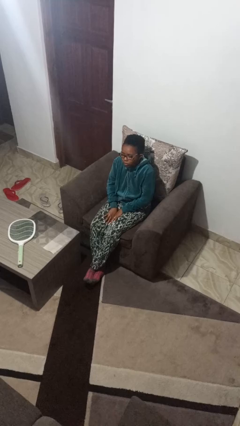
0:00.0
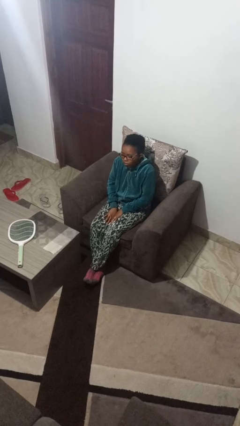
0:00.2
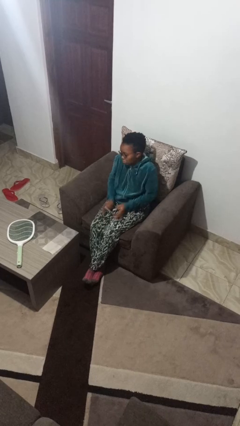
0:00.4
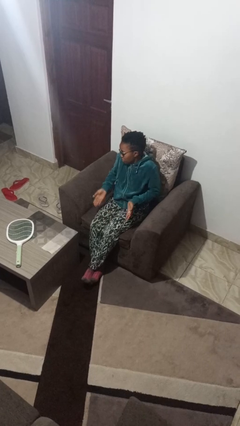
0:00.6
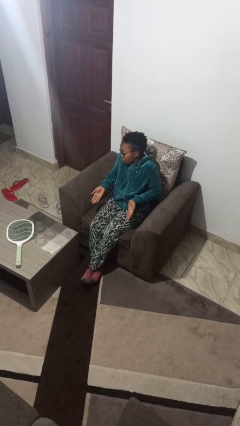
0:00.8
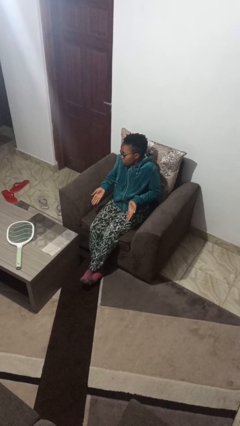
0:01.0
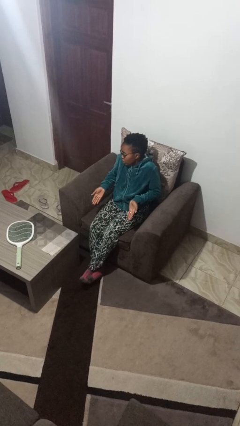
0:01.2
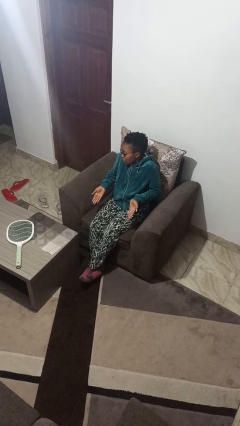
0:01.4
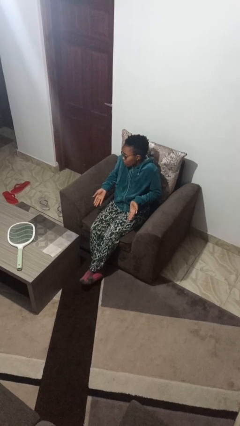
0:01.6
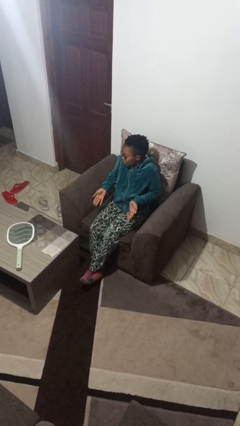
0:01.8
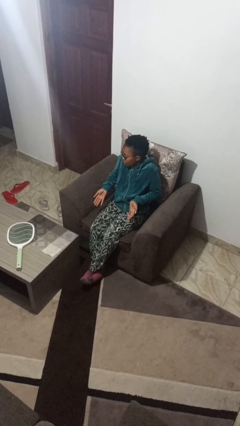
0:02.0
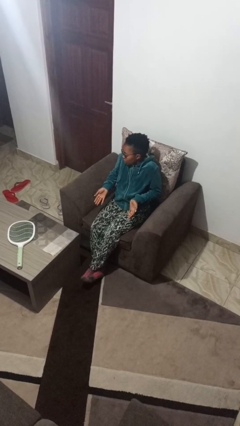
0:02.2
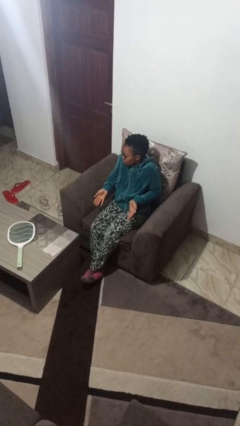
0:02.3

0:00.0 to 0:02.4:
person shrugs

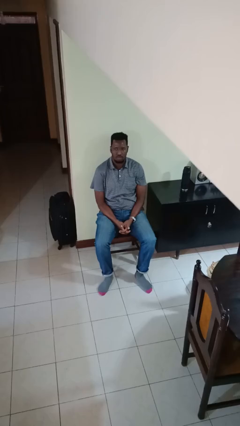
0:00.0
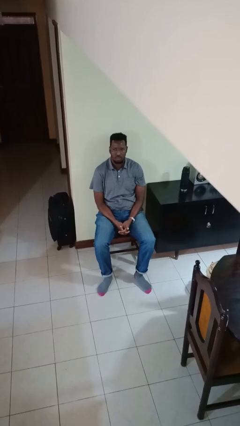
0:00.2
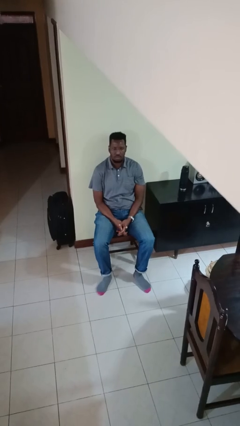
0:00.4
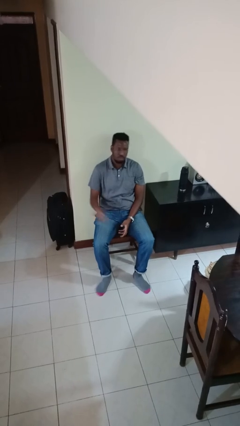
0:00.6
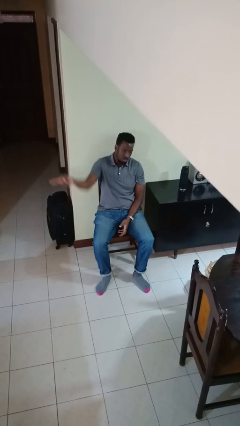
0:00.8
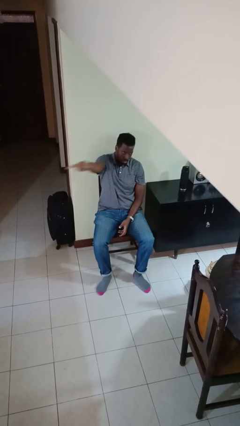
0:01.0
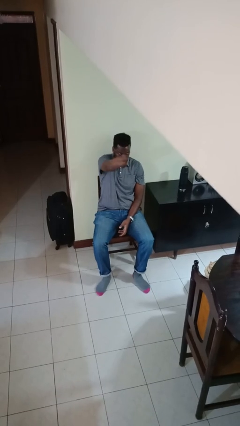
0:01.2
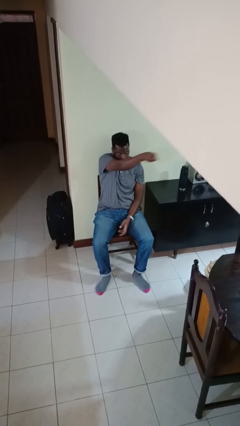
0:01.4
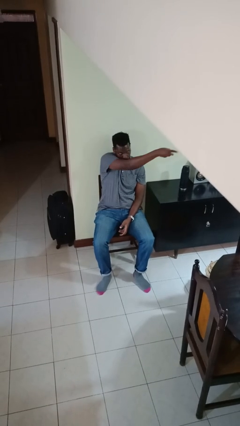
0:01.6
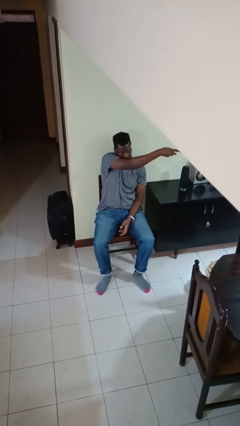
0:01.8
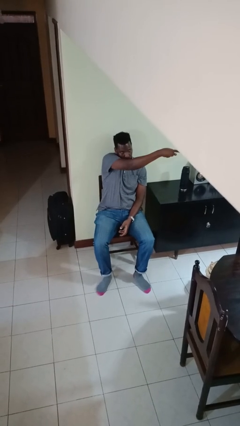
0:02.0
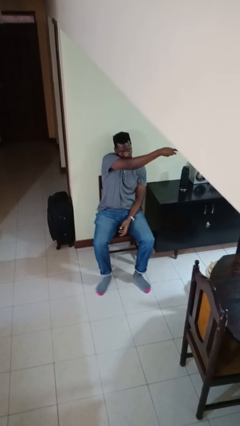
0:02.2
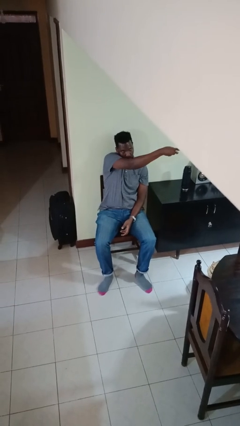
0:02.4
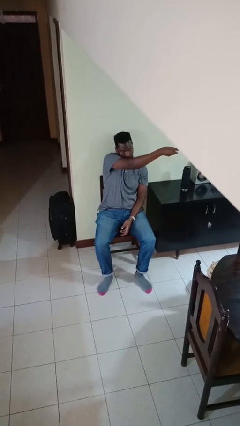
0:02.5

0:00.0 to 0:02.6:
person gestures swipe left

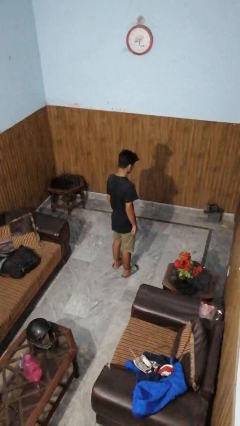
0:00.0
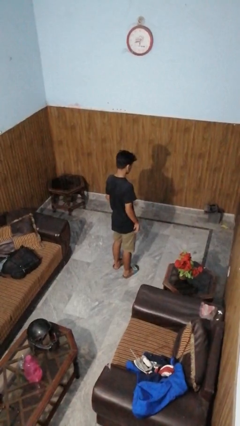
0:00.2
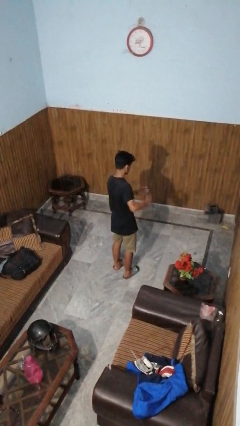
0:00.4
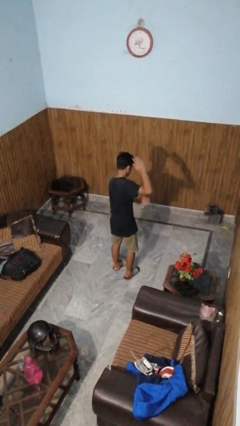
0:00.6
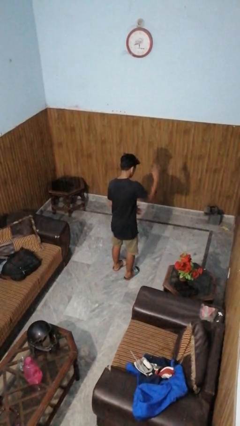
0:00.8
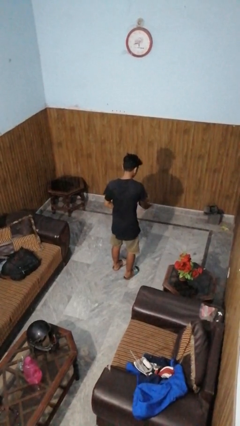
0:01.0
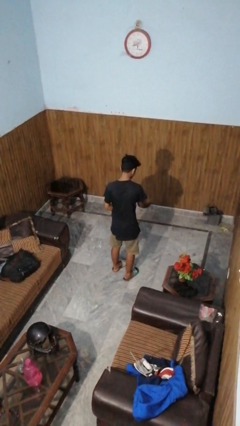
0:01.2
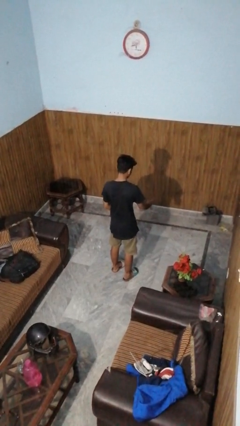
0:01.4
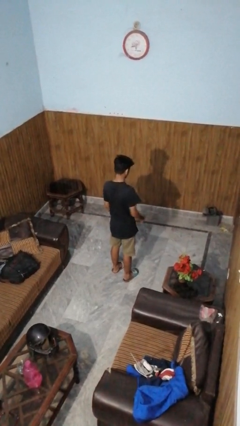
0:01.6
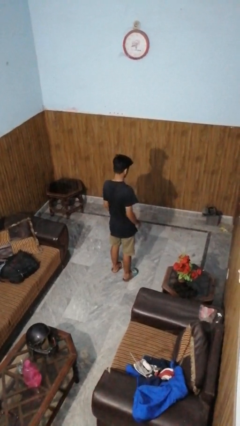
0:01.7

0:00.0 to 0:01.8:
person karate chop

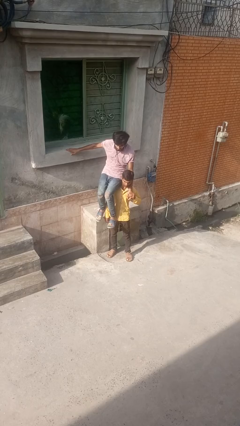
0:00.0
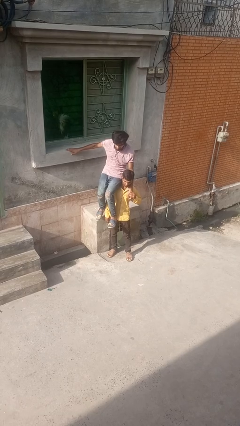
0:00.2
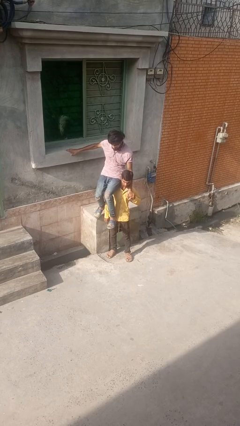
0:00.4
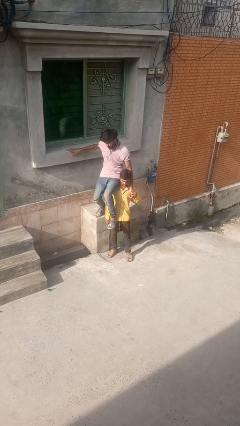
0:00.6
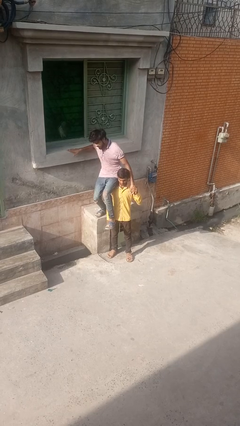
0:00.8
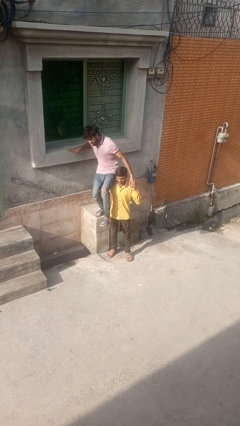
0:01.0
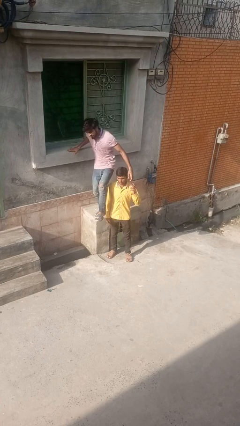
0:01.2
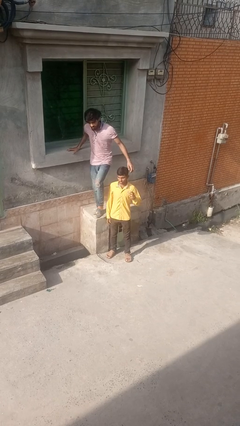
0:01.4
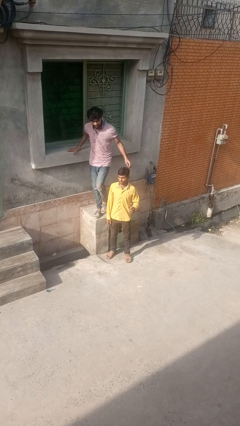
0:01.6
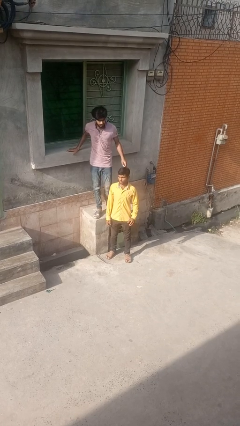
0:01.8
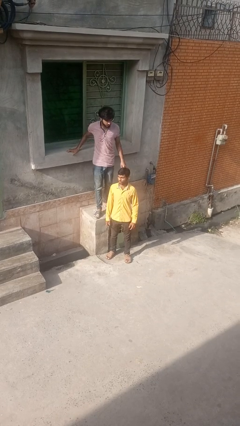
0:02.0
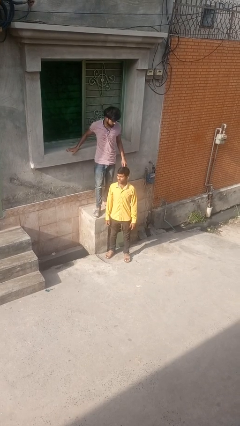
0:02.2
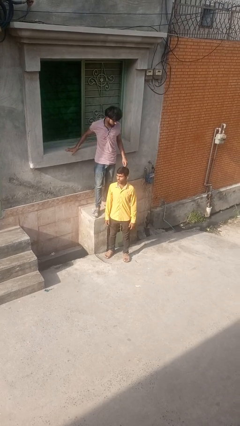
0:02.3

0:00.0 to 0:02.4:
person puts down person

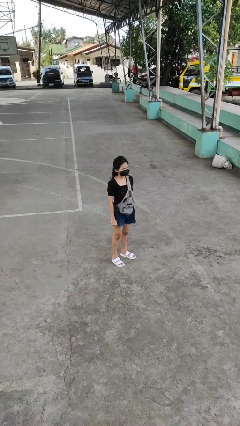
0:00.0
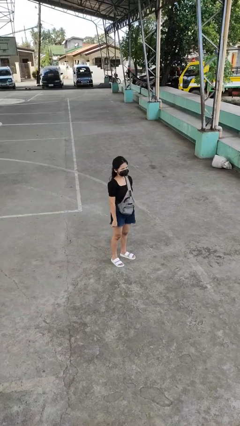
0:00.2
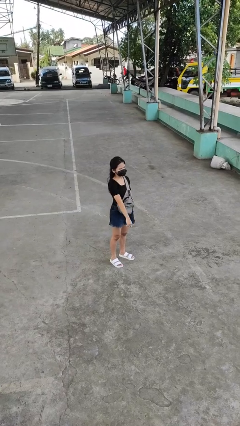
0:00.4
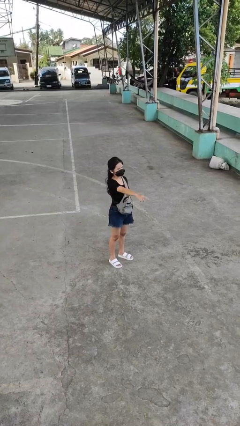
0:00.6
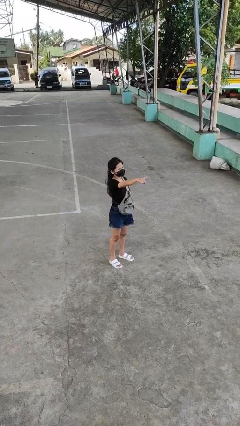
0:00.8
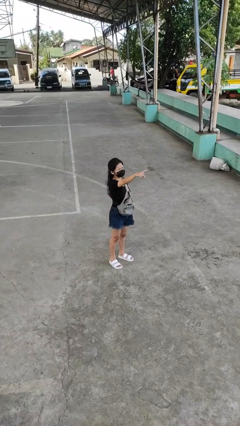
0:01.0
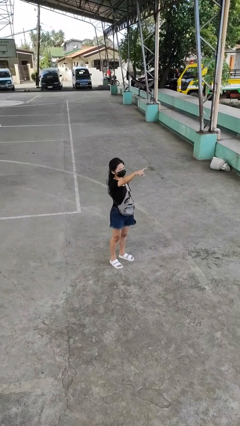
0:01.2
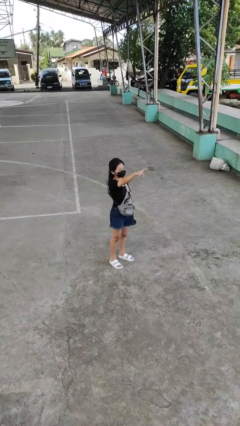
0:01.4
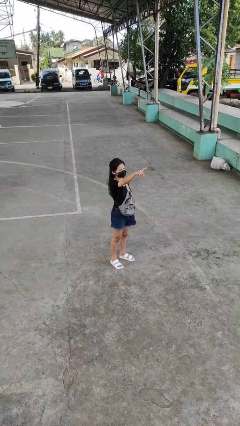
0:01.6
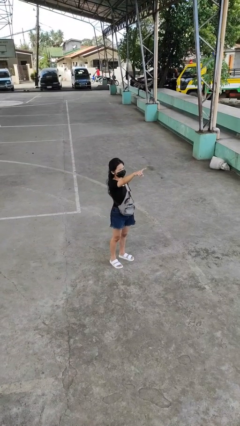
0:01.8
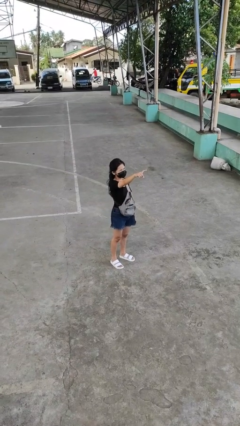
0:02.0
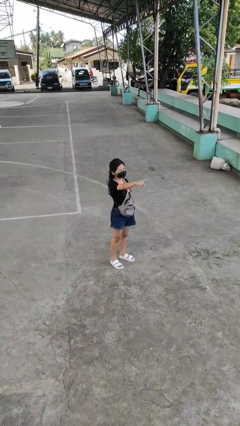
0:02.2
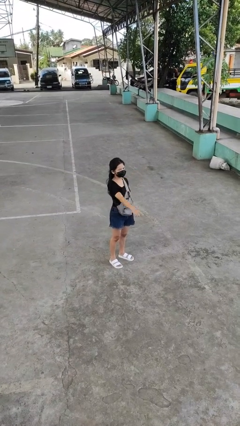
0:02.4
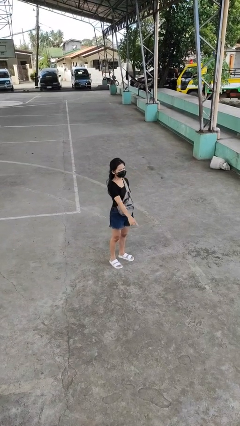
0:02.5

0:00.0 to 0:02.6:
person points at person

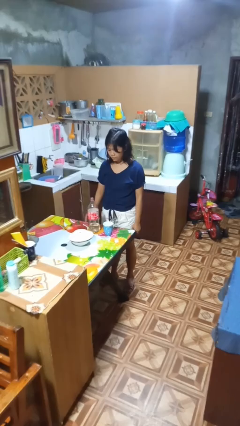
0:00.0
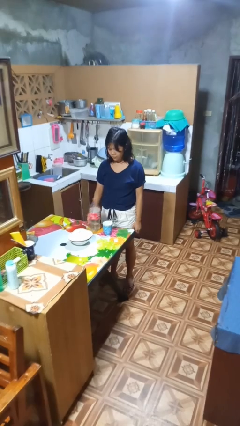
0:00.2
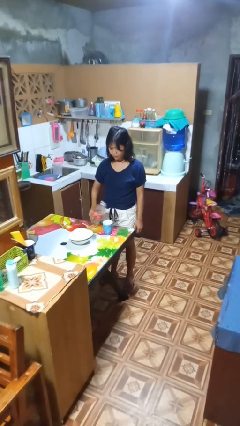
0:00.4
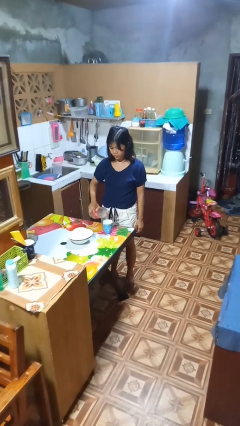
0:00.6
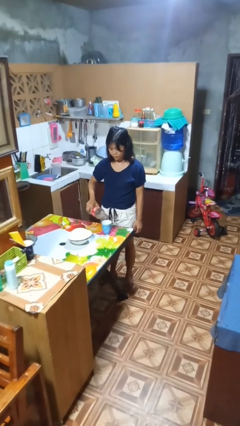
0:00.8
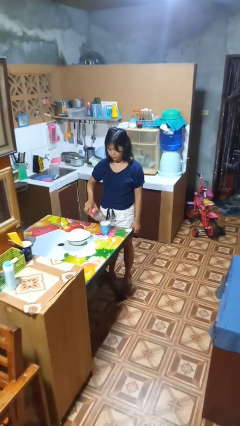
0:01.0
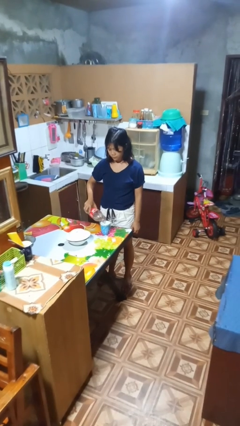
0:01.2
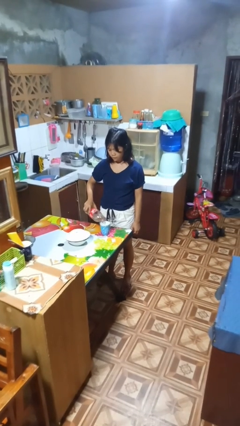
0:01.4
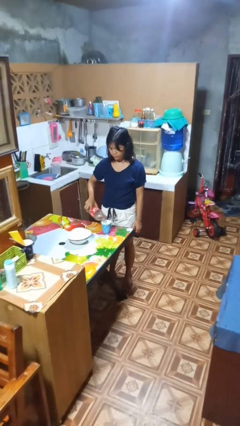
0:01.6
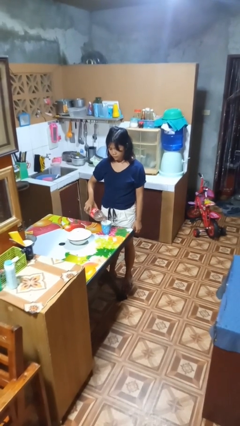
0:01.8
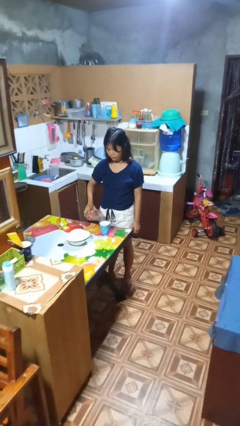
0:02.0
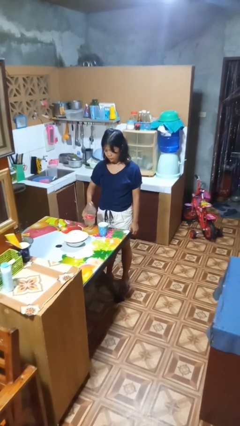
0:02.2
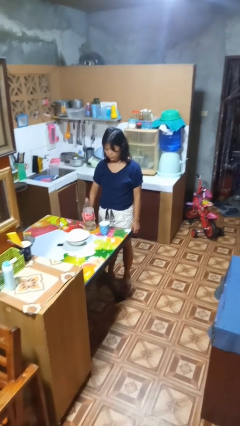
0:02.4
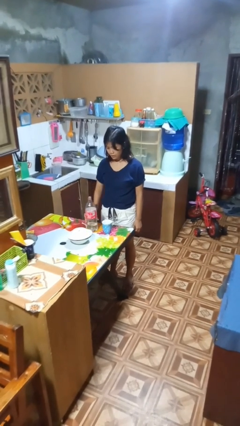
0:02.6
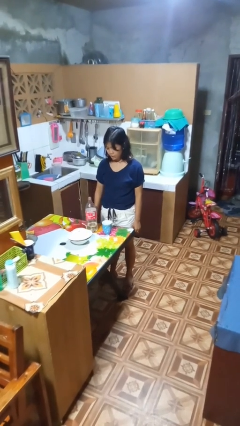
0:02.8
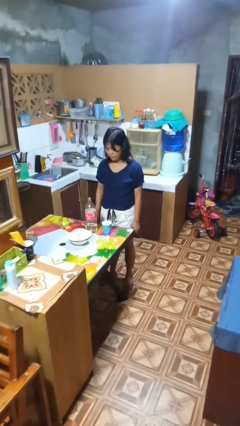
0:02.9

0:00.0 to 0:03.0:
person pours liquid into cup

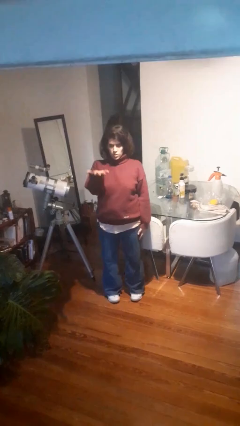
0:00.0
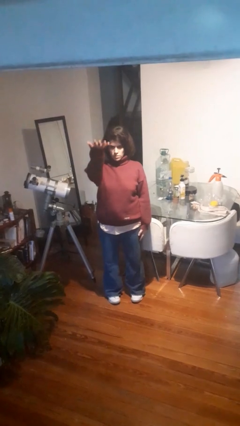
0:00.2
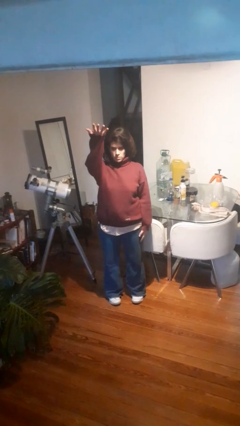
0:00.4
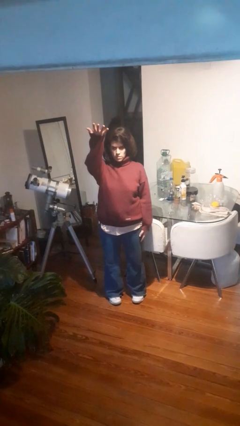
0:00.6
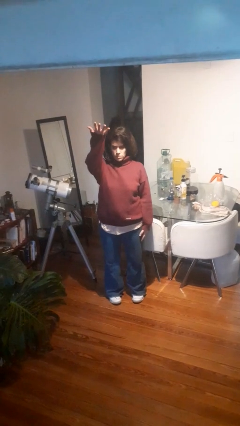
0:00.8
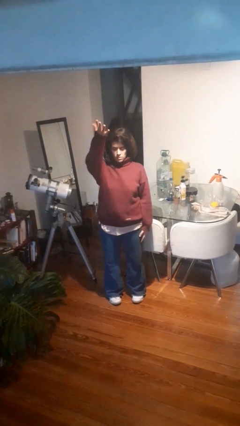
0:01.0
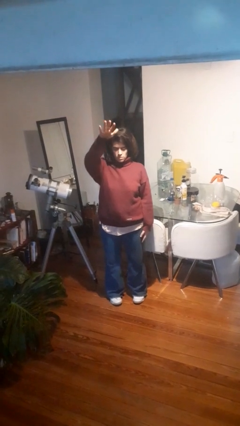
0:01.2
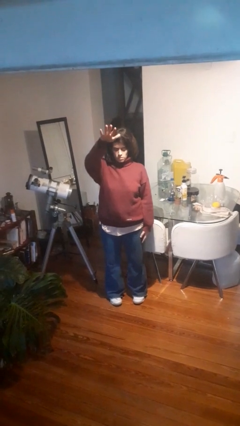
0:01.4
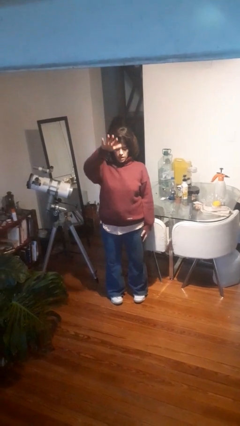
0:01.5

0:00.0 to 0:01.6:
person gestures swipe up

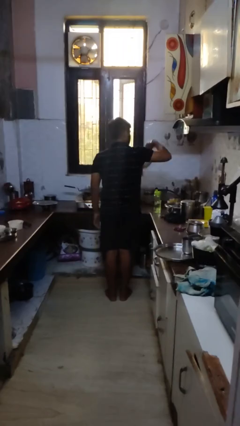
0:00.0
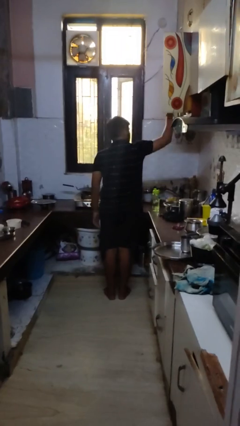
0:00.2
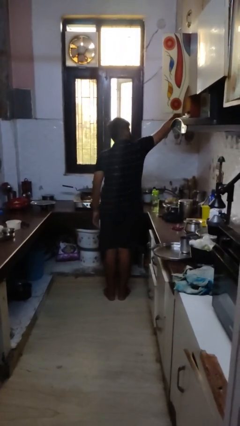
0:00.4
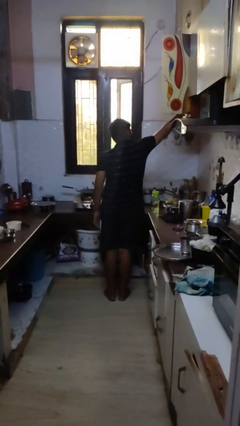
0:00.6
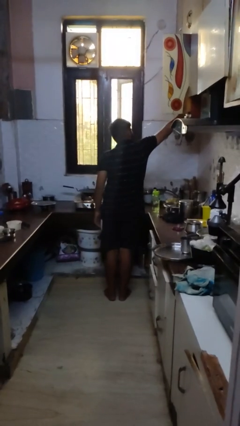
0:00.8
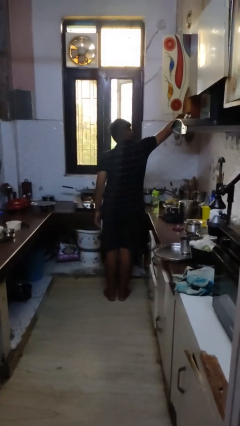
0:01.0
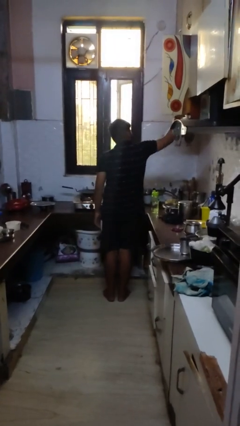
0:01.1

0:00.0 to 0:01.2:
person puts object in cabinet
